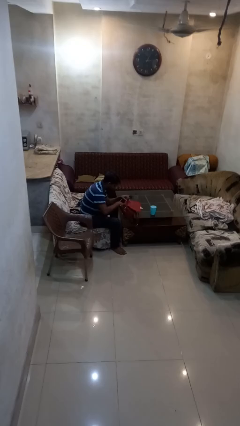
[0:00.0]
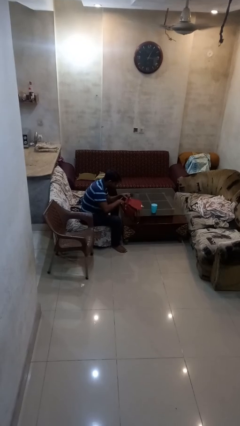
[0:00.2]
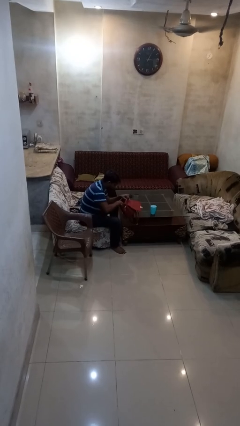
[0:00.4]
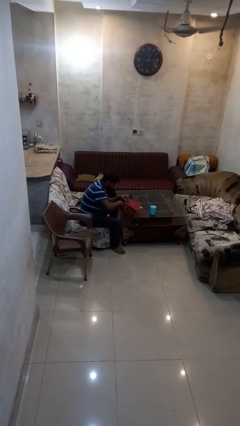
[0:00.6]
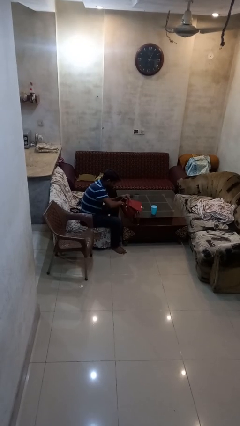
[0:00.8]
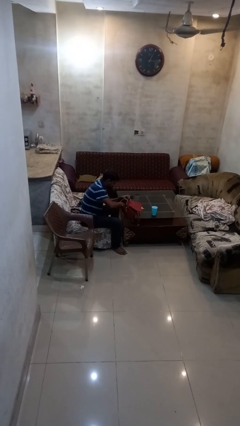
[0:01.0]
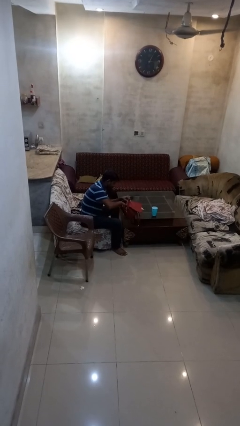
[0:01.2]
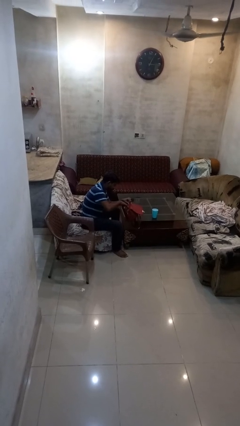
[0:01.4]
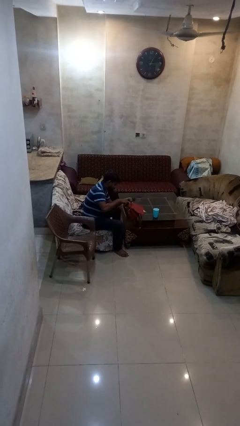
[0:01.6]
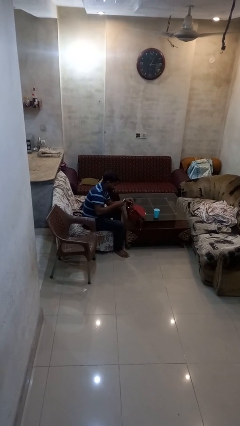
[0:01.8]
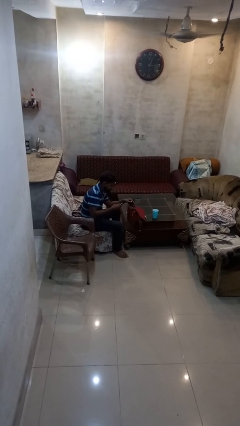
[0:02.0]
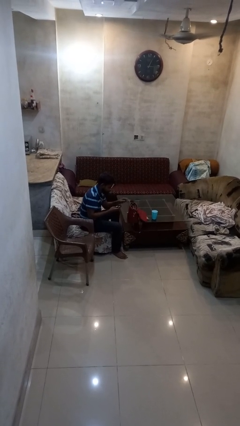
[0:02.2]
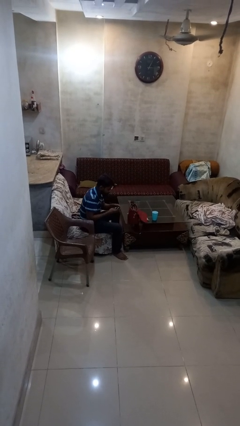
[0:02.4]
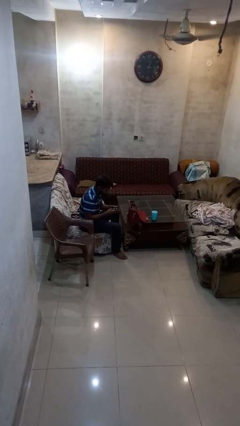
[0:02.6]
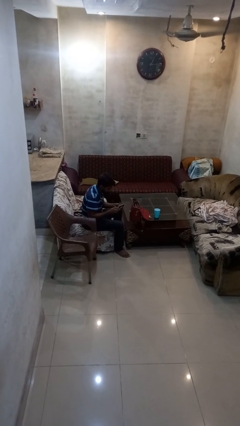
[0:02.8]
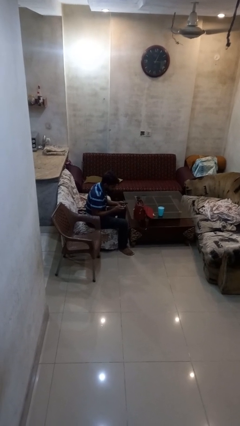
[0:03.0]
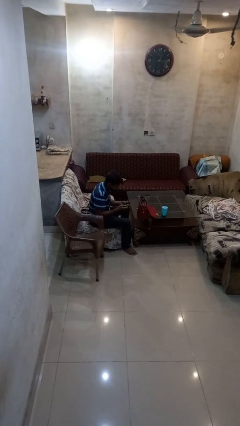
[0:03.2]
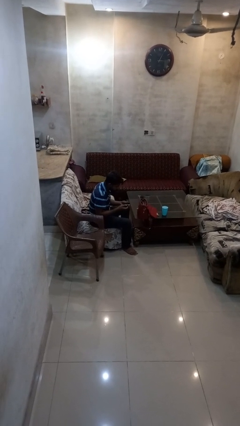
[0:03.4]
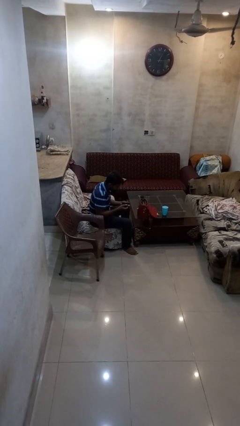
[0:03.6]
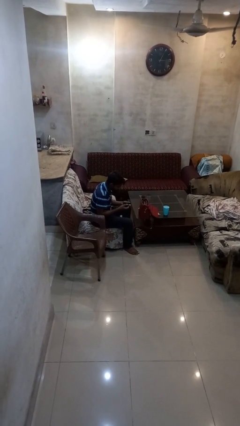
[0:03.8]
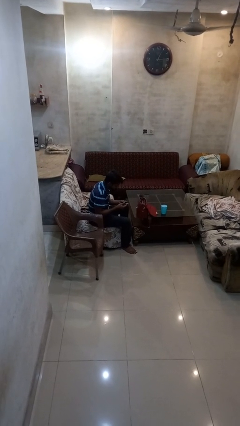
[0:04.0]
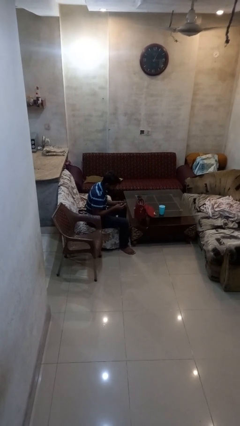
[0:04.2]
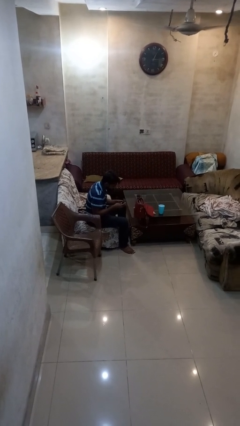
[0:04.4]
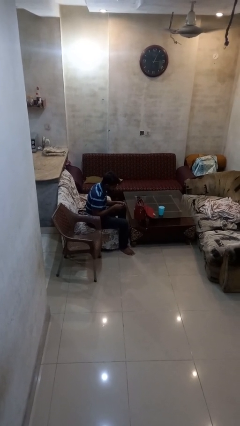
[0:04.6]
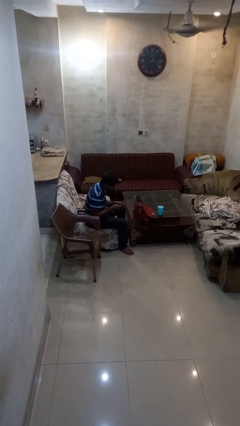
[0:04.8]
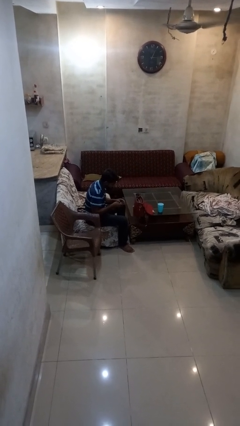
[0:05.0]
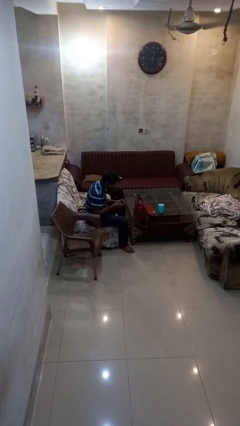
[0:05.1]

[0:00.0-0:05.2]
person takes object from purse

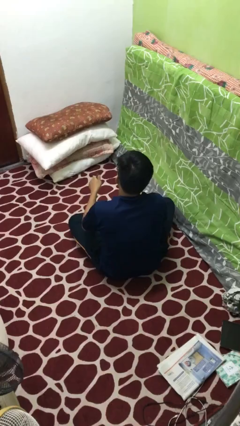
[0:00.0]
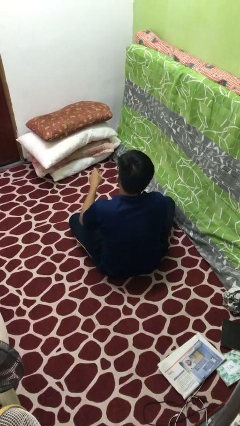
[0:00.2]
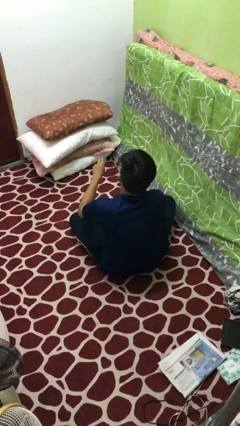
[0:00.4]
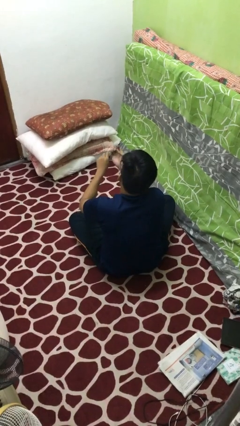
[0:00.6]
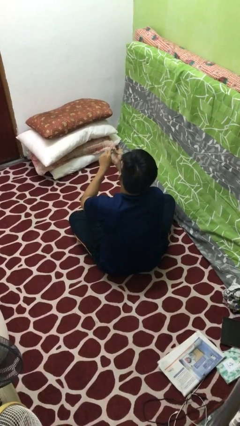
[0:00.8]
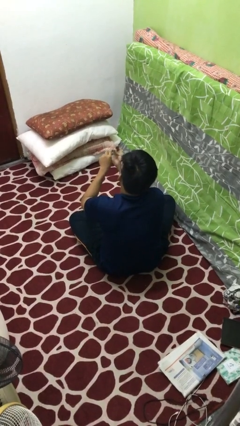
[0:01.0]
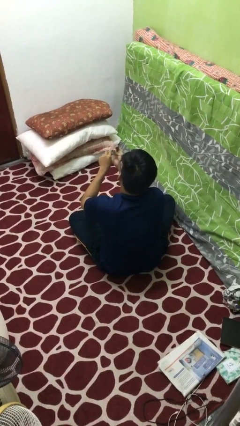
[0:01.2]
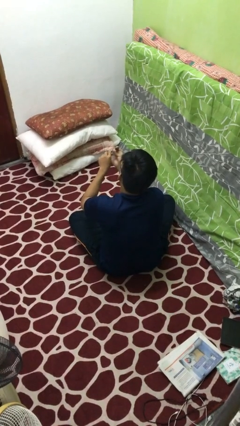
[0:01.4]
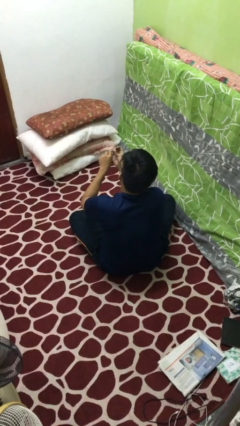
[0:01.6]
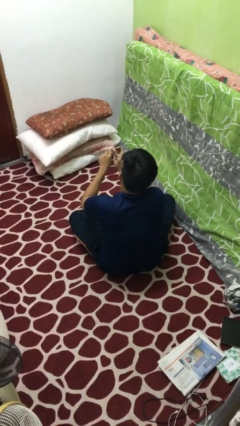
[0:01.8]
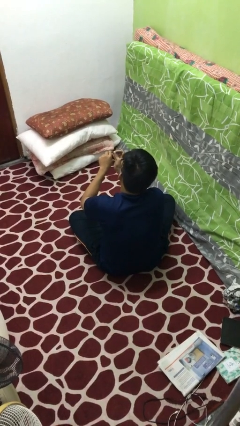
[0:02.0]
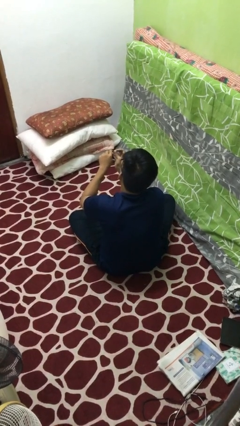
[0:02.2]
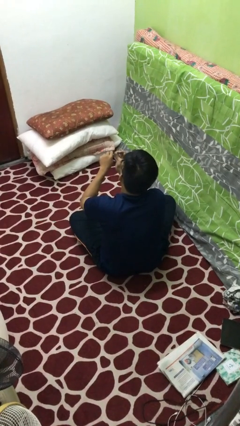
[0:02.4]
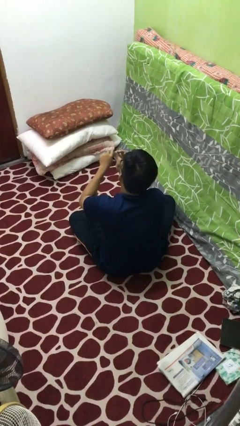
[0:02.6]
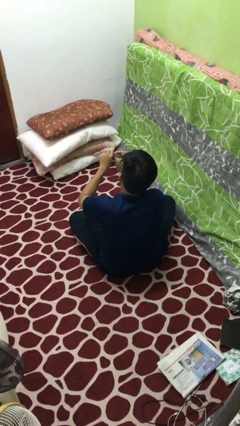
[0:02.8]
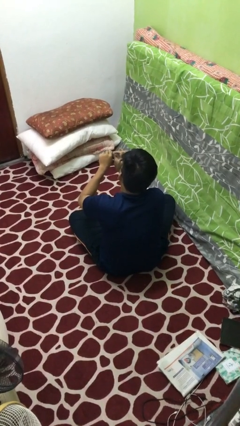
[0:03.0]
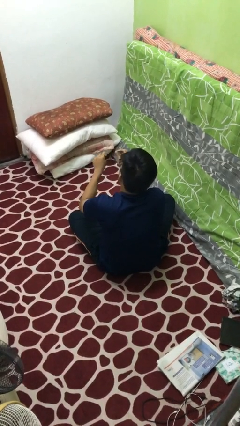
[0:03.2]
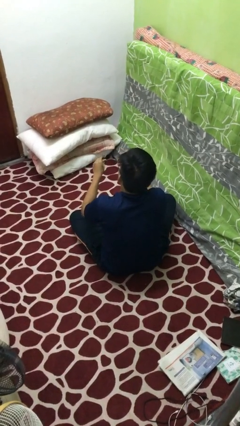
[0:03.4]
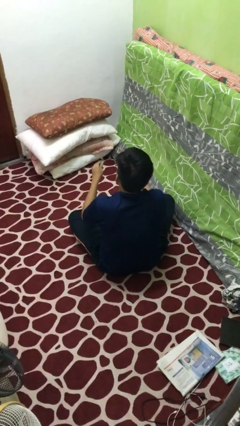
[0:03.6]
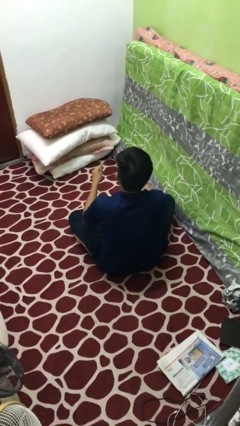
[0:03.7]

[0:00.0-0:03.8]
person clips fingernails

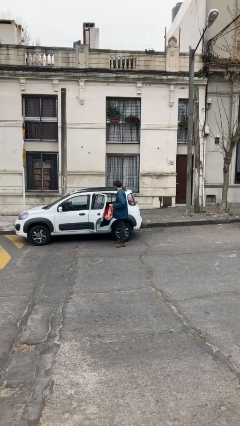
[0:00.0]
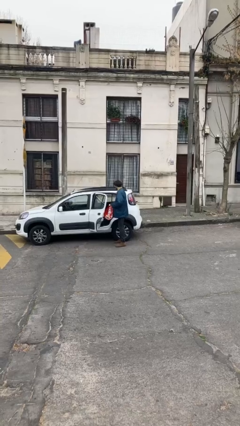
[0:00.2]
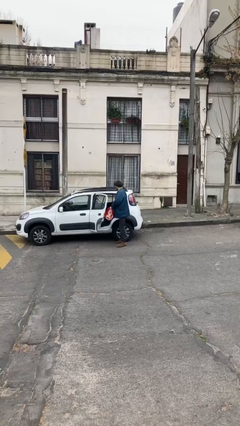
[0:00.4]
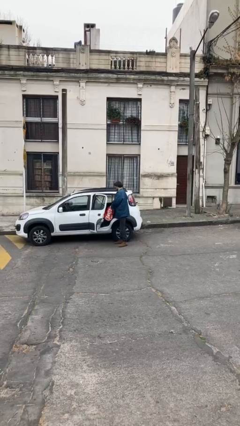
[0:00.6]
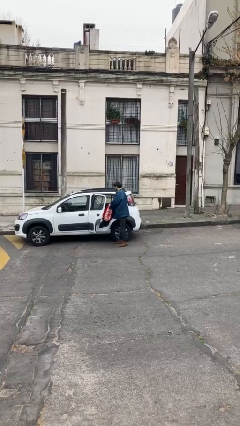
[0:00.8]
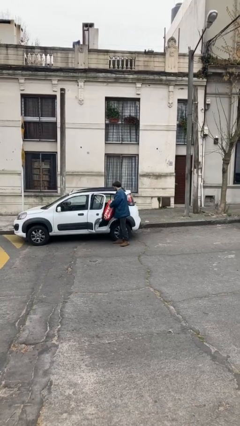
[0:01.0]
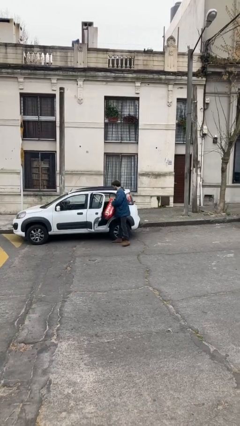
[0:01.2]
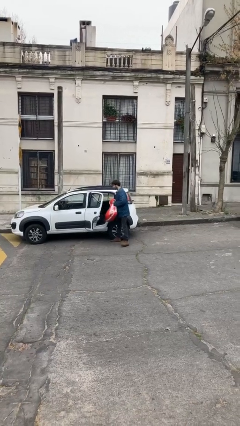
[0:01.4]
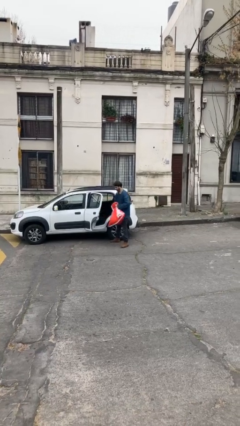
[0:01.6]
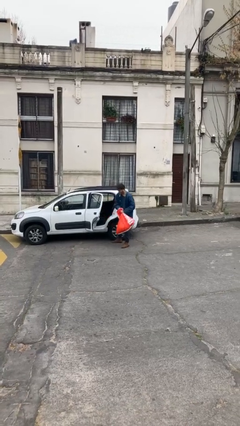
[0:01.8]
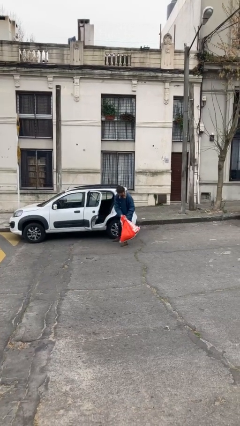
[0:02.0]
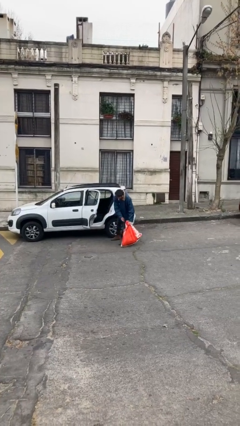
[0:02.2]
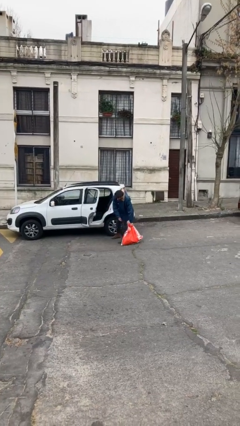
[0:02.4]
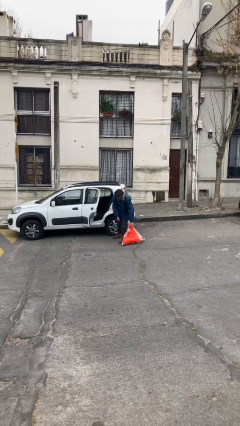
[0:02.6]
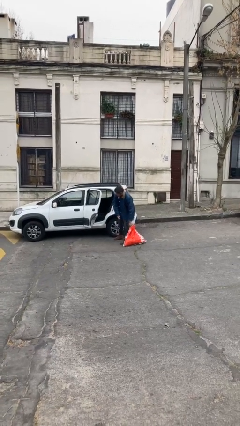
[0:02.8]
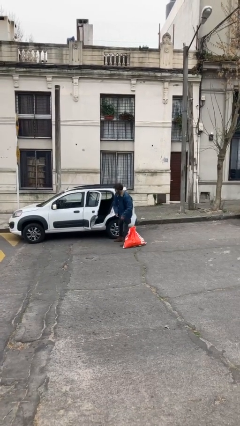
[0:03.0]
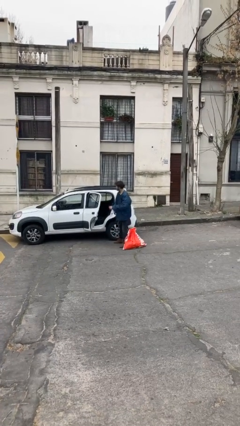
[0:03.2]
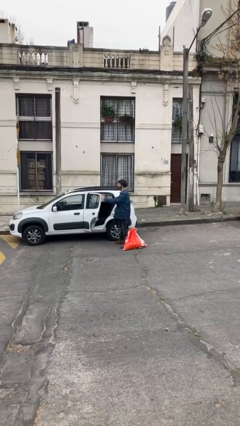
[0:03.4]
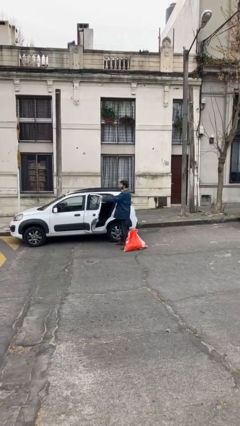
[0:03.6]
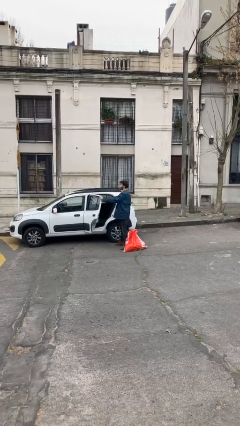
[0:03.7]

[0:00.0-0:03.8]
person unloads car

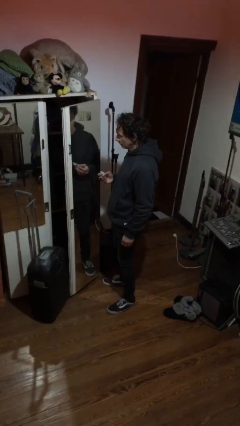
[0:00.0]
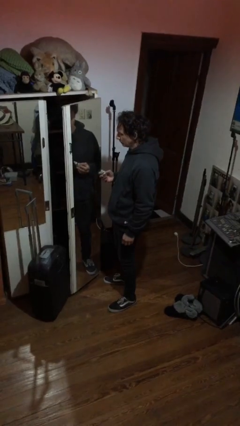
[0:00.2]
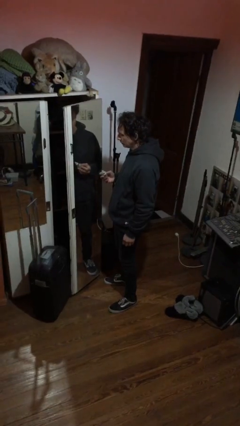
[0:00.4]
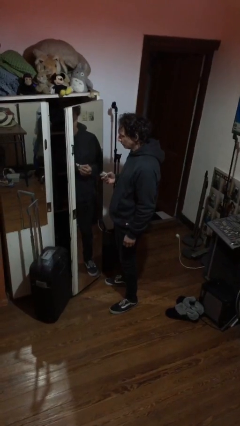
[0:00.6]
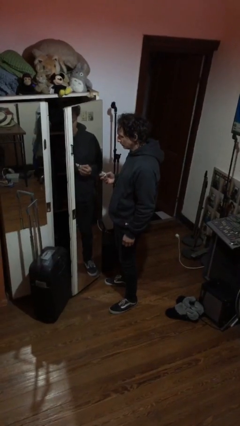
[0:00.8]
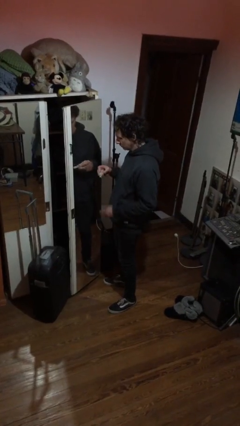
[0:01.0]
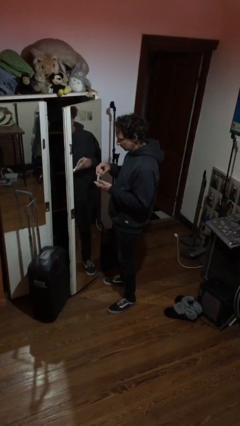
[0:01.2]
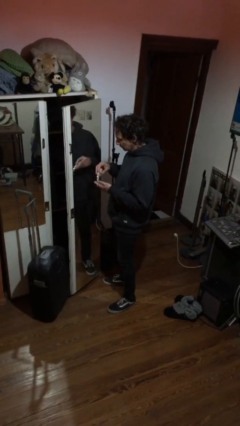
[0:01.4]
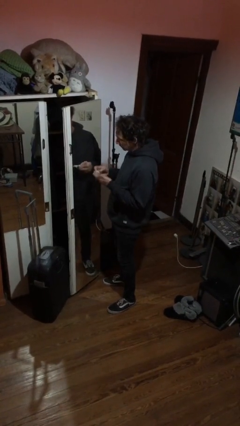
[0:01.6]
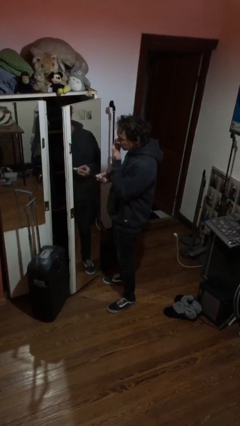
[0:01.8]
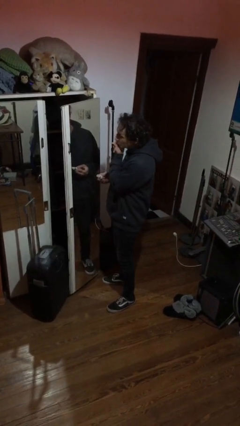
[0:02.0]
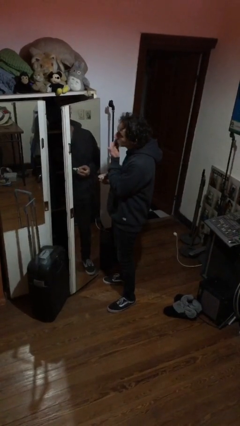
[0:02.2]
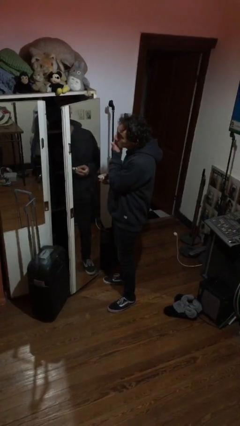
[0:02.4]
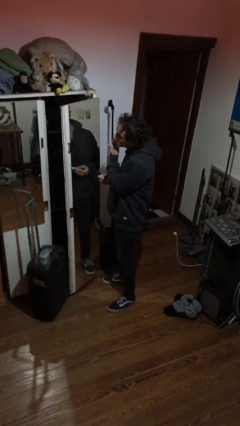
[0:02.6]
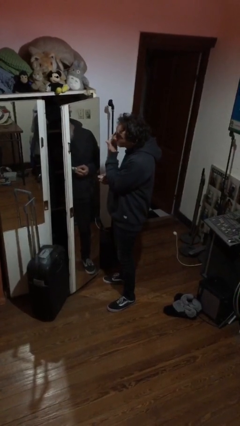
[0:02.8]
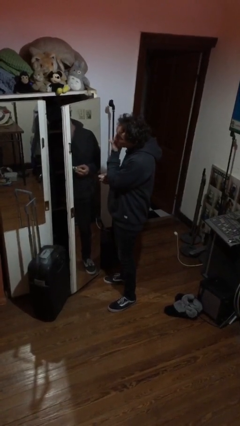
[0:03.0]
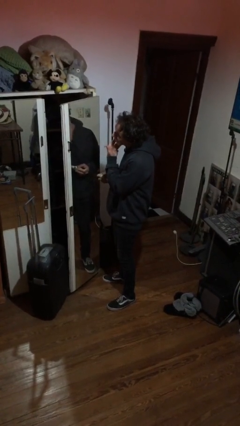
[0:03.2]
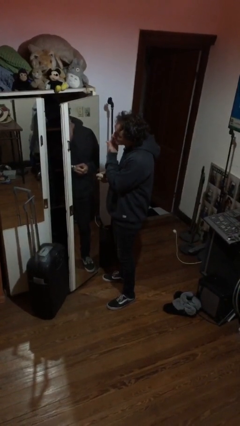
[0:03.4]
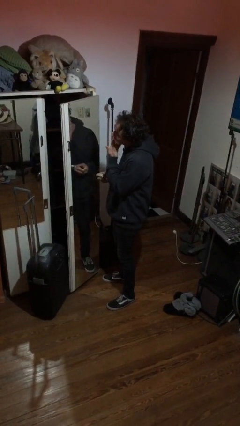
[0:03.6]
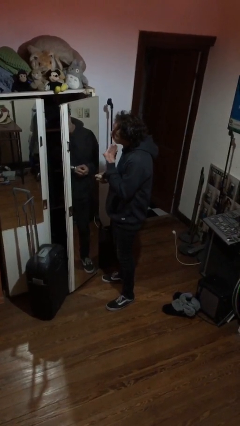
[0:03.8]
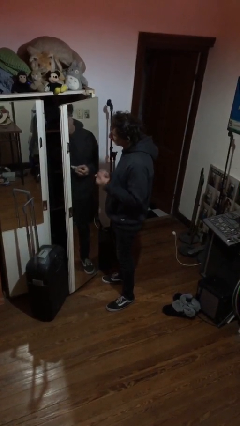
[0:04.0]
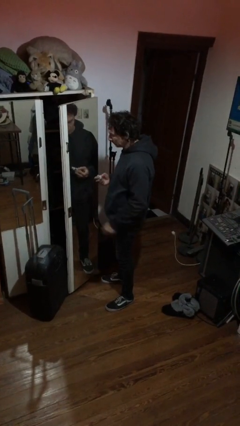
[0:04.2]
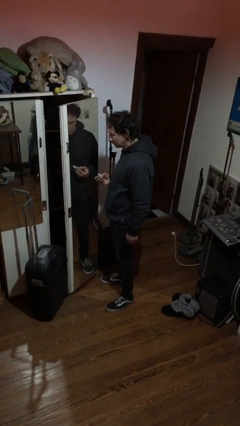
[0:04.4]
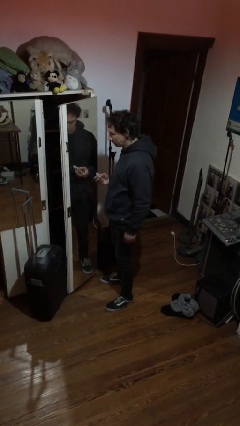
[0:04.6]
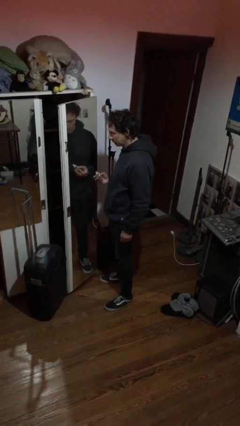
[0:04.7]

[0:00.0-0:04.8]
person applies foundation makeup

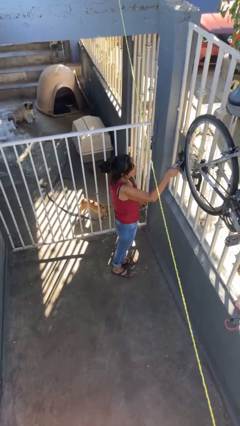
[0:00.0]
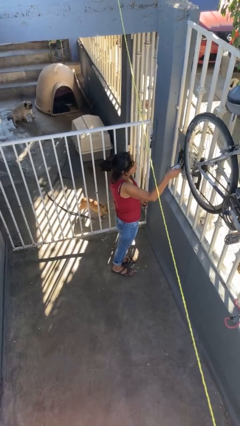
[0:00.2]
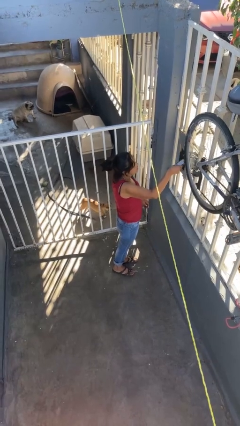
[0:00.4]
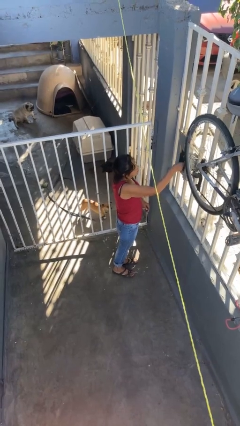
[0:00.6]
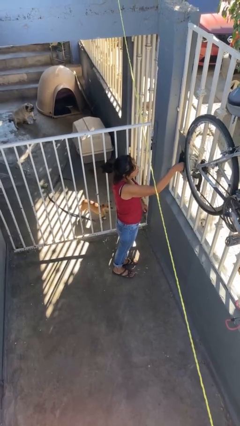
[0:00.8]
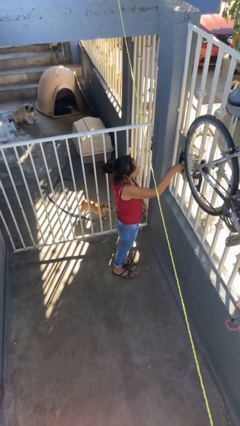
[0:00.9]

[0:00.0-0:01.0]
person puts letters in mailbox
